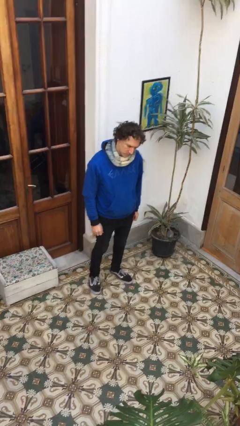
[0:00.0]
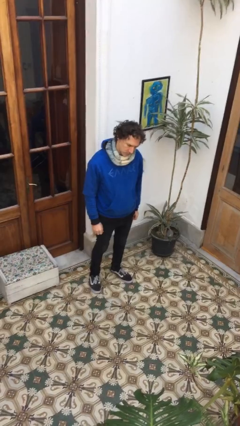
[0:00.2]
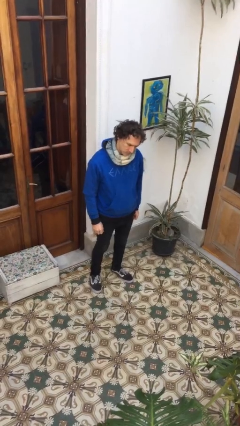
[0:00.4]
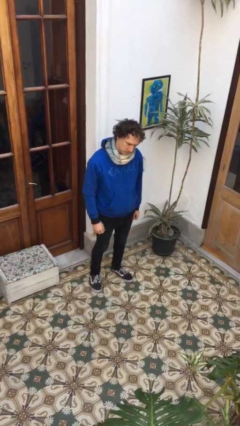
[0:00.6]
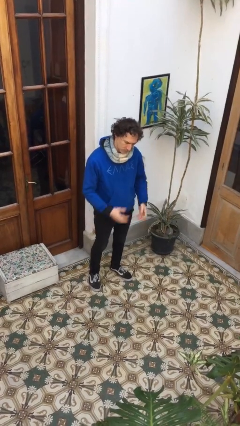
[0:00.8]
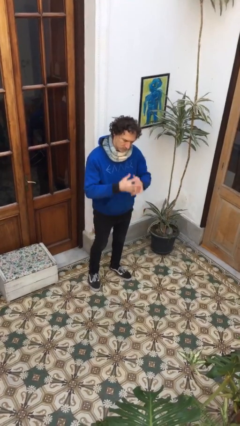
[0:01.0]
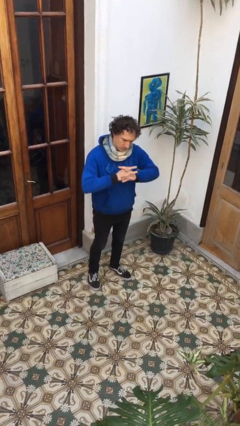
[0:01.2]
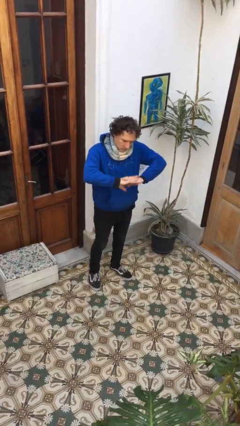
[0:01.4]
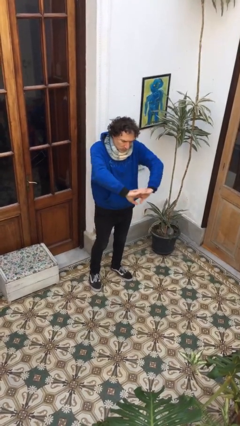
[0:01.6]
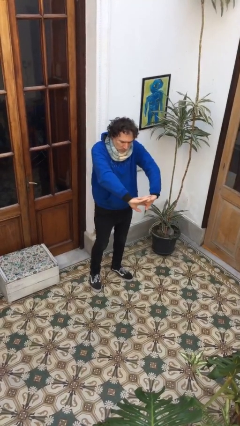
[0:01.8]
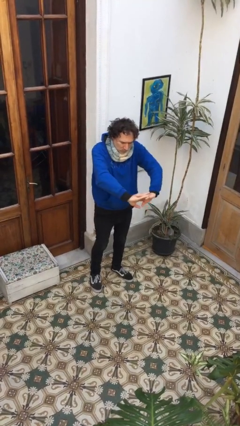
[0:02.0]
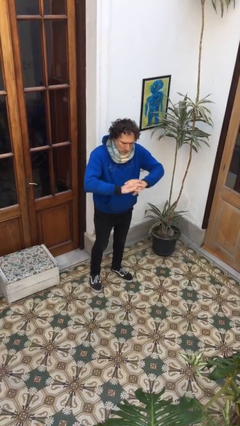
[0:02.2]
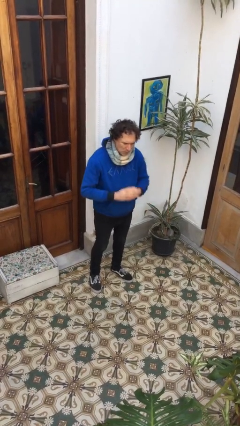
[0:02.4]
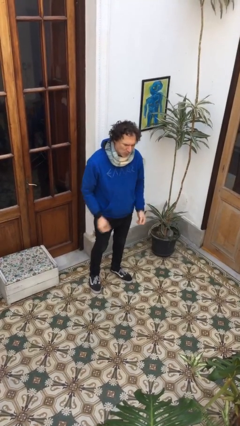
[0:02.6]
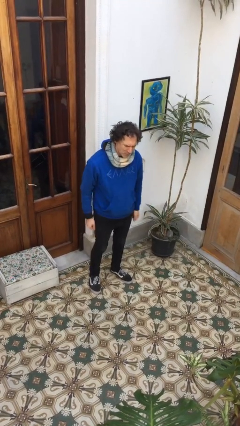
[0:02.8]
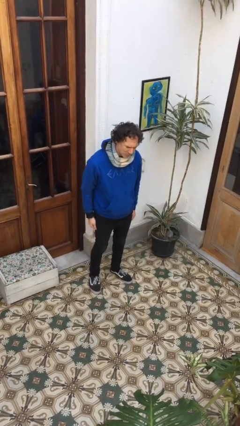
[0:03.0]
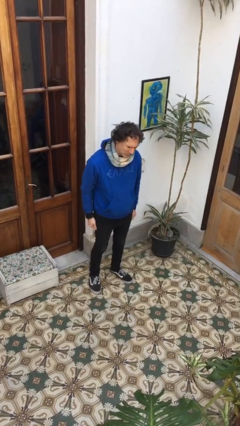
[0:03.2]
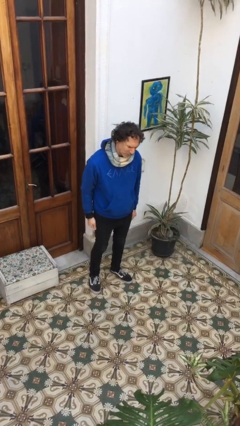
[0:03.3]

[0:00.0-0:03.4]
person cracks knuckles

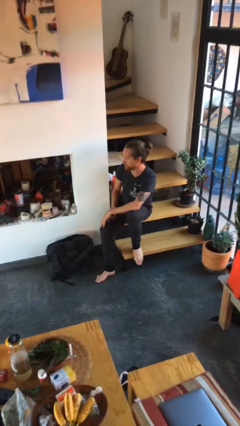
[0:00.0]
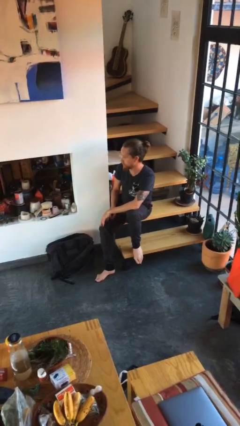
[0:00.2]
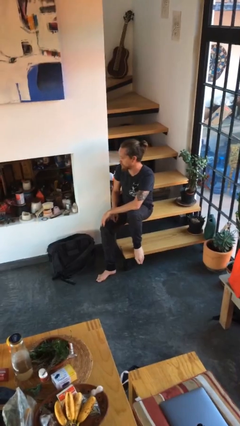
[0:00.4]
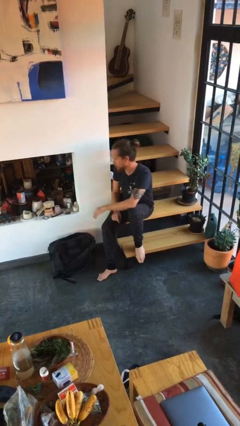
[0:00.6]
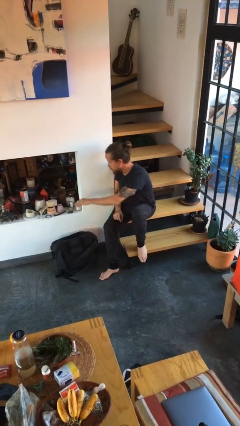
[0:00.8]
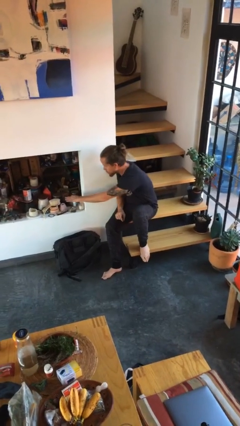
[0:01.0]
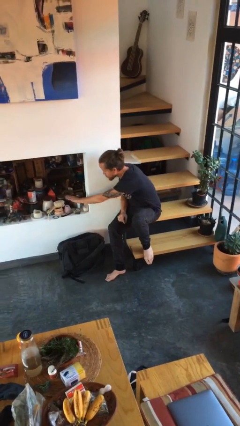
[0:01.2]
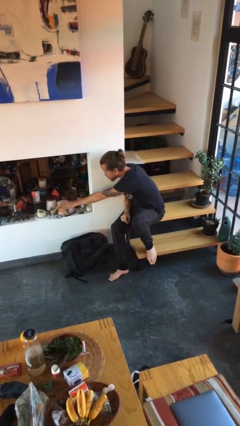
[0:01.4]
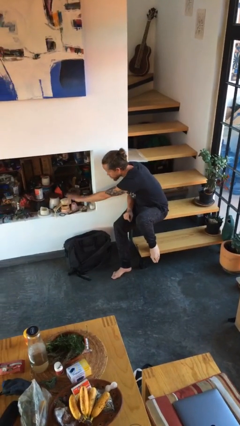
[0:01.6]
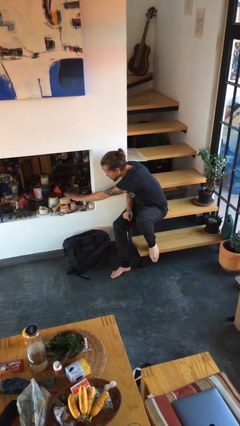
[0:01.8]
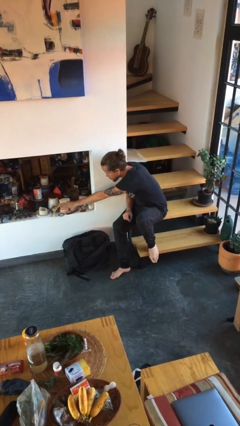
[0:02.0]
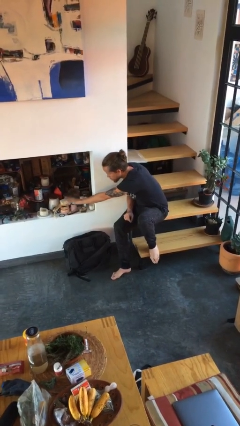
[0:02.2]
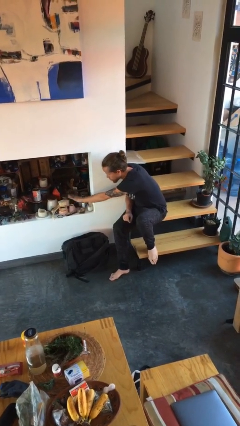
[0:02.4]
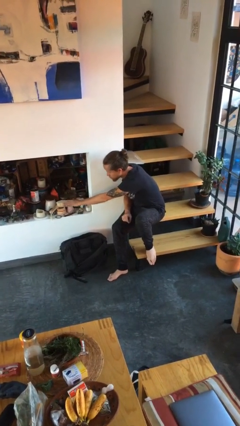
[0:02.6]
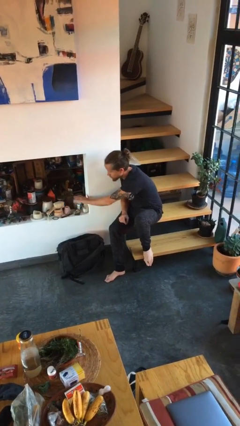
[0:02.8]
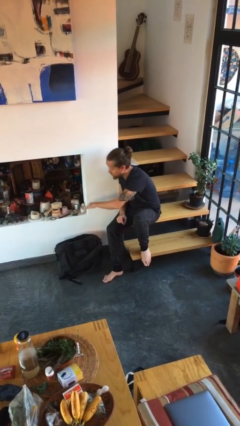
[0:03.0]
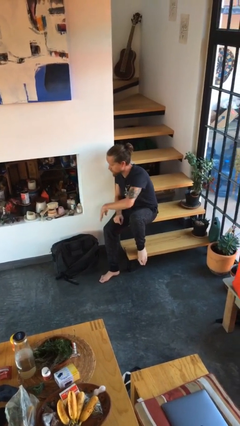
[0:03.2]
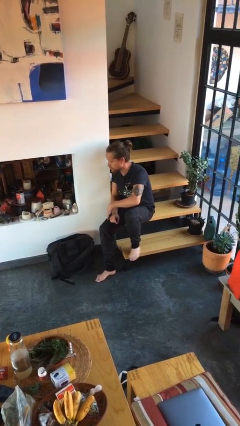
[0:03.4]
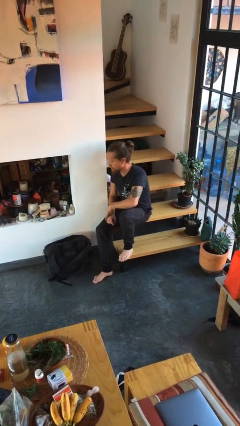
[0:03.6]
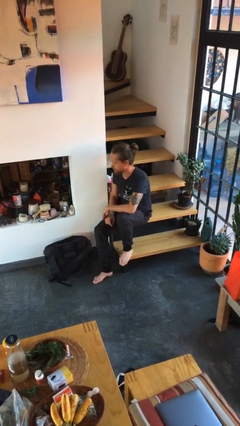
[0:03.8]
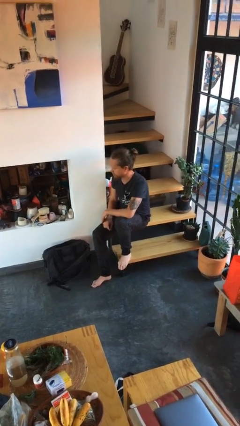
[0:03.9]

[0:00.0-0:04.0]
person waves hand over object

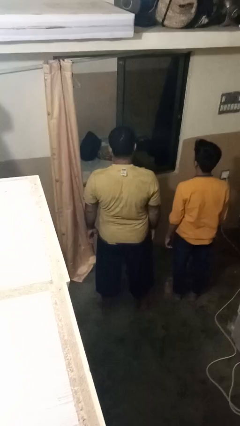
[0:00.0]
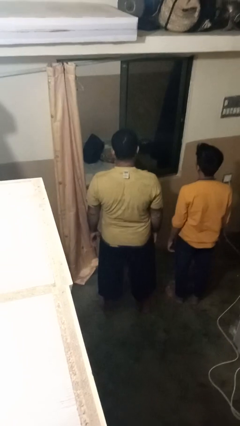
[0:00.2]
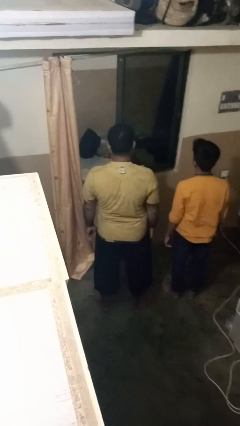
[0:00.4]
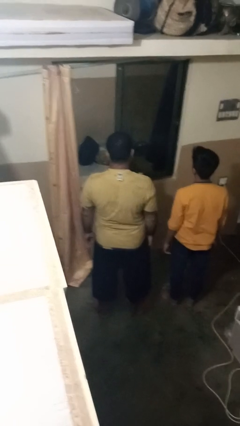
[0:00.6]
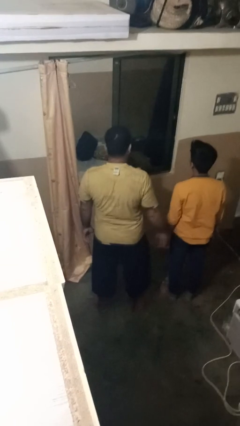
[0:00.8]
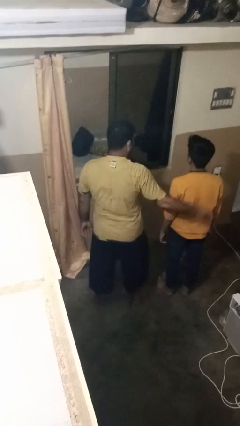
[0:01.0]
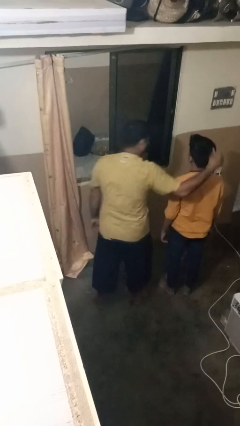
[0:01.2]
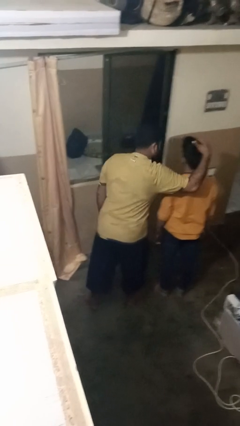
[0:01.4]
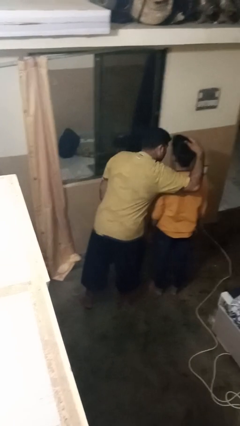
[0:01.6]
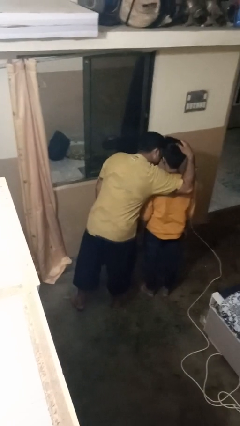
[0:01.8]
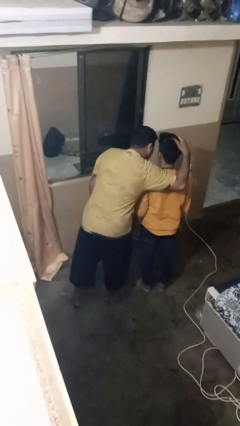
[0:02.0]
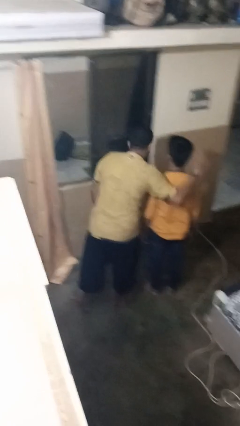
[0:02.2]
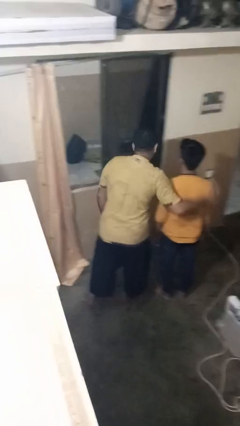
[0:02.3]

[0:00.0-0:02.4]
person kisses cheek of person

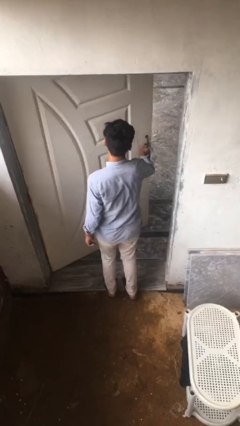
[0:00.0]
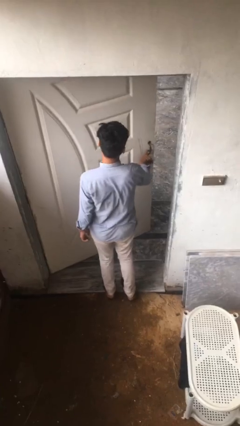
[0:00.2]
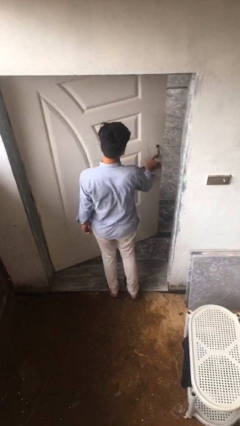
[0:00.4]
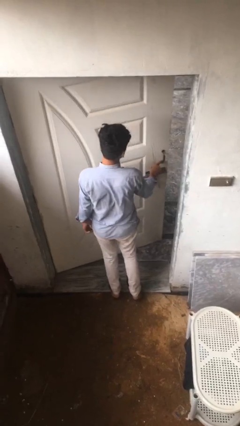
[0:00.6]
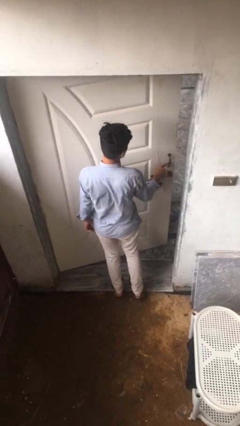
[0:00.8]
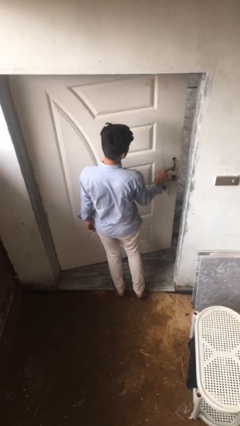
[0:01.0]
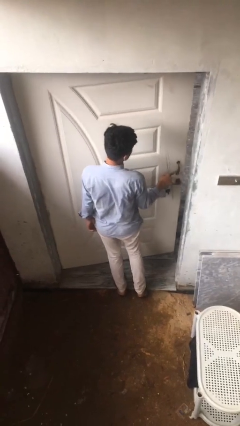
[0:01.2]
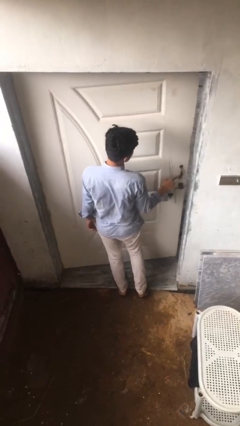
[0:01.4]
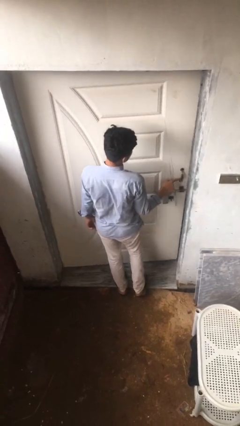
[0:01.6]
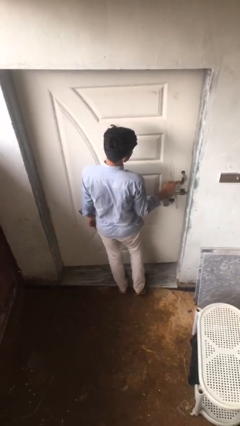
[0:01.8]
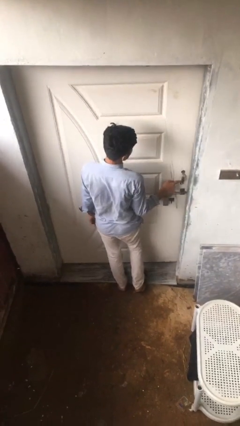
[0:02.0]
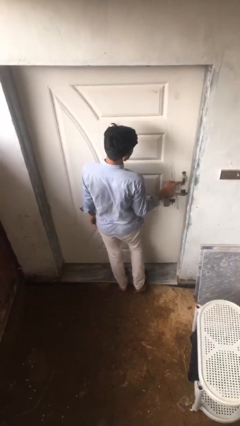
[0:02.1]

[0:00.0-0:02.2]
person closes facility door

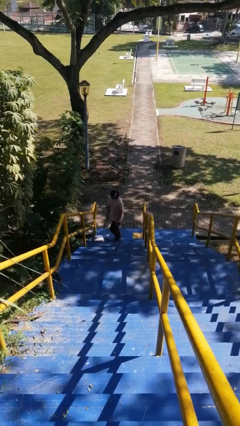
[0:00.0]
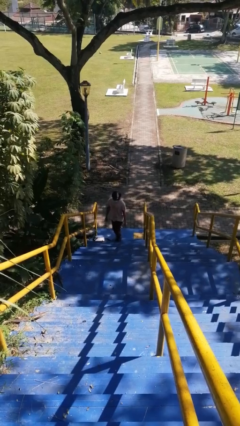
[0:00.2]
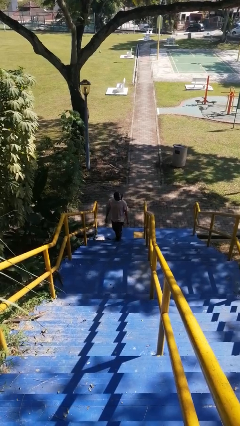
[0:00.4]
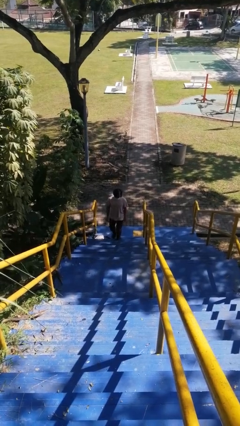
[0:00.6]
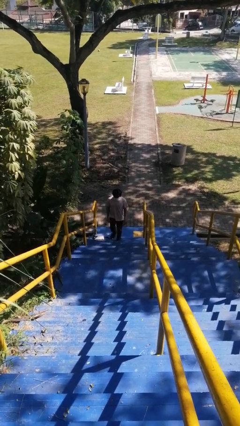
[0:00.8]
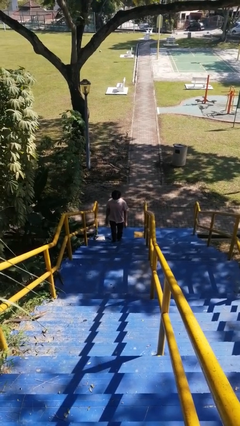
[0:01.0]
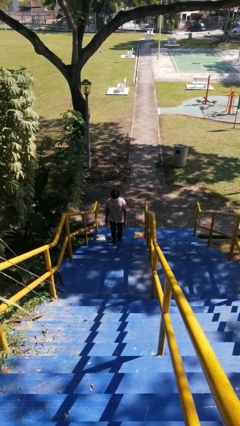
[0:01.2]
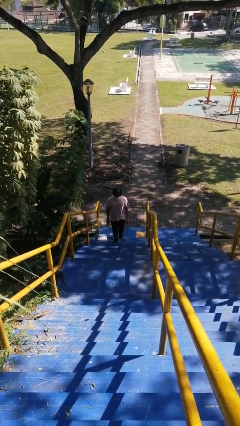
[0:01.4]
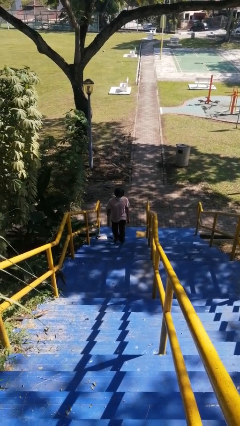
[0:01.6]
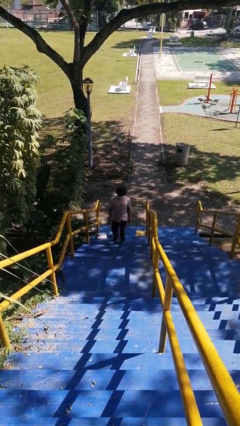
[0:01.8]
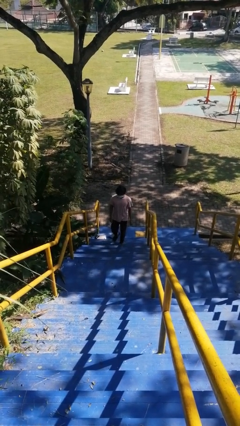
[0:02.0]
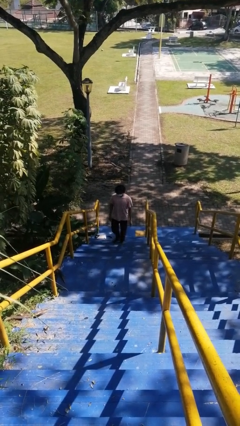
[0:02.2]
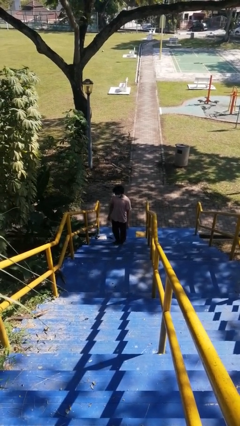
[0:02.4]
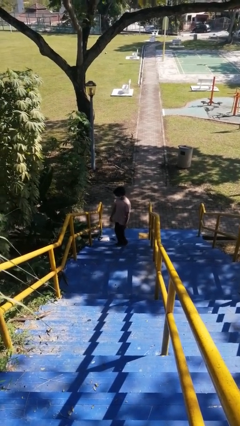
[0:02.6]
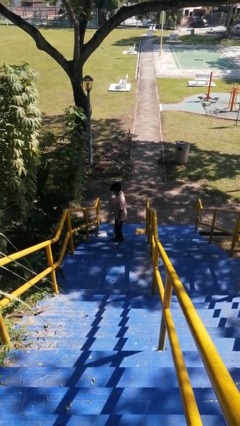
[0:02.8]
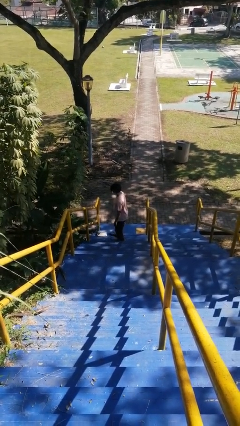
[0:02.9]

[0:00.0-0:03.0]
person climbs up stairs

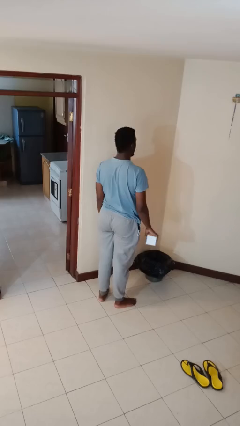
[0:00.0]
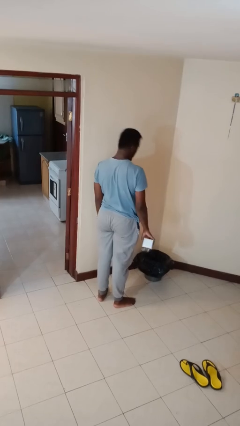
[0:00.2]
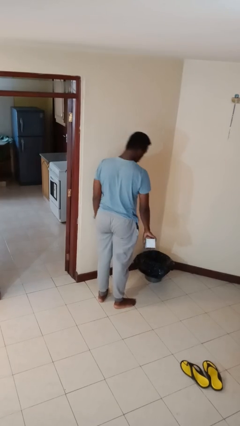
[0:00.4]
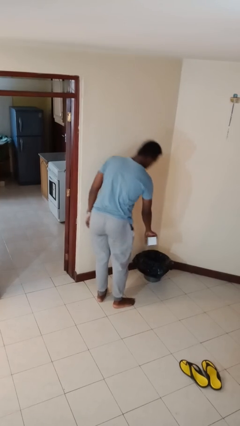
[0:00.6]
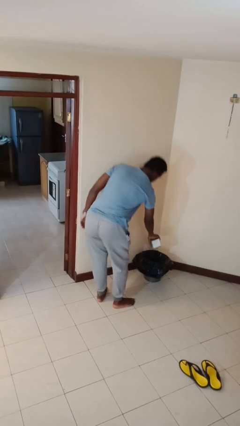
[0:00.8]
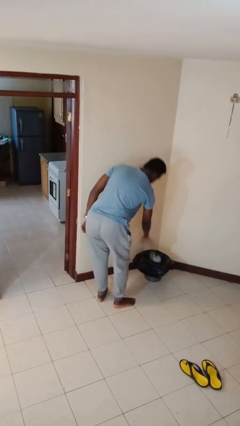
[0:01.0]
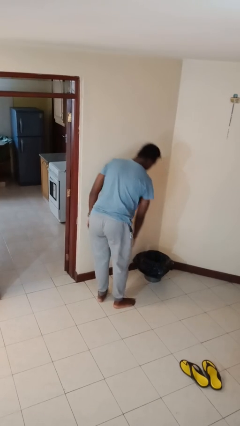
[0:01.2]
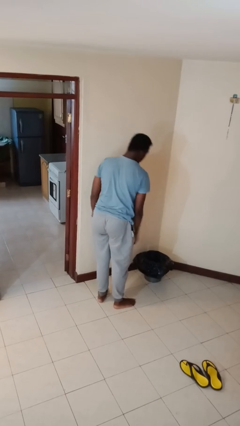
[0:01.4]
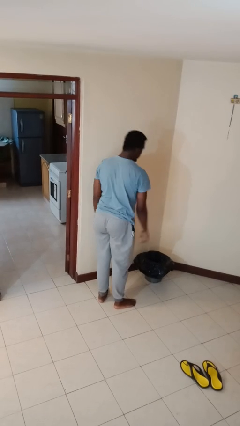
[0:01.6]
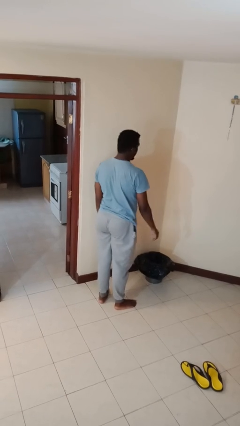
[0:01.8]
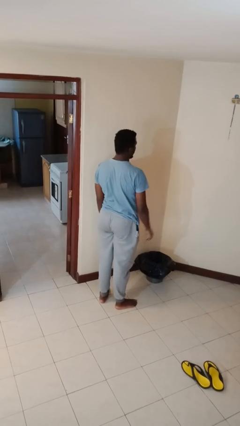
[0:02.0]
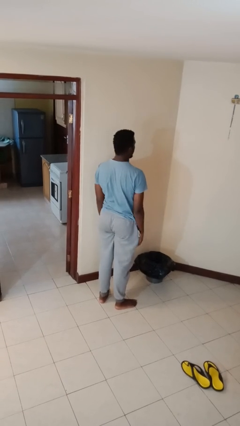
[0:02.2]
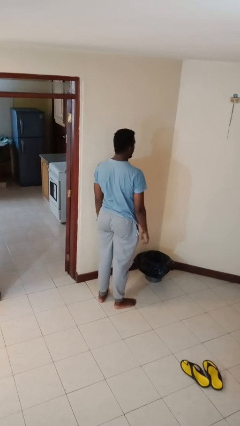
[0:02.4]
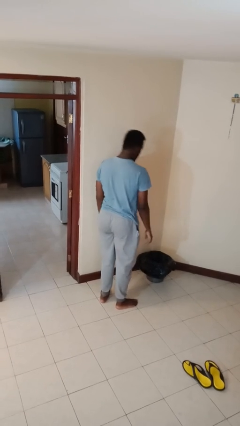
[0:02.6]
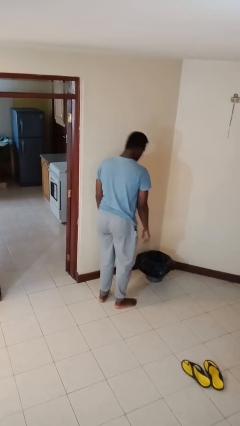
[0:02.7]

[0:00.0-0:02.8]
person discards trash
